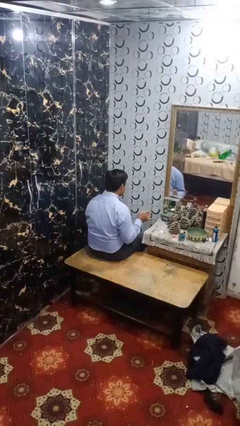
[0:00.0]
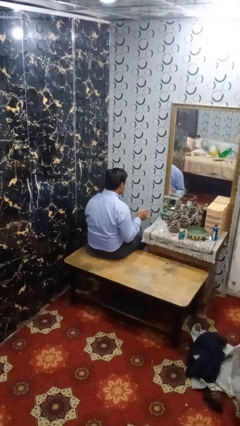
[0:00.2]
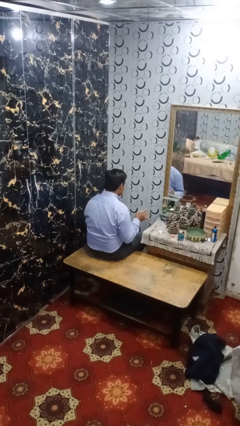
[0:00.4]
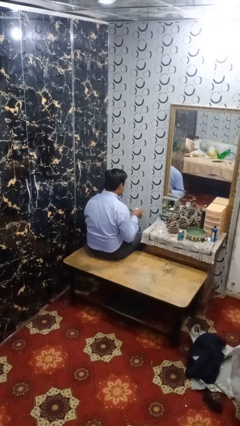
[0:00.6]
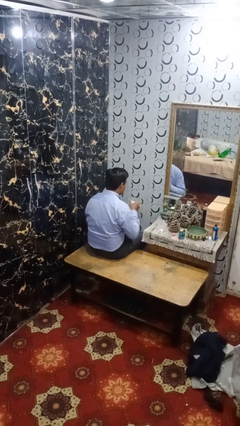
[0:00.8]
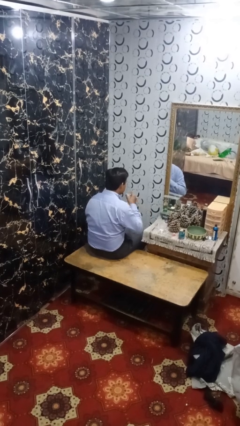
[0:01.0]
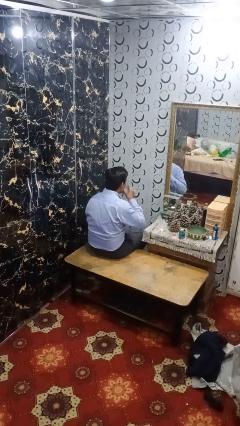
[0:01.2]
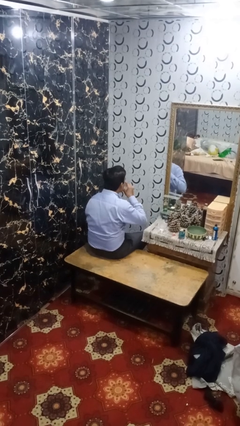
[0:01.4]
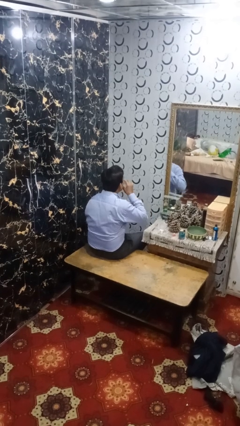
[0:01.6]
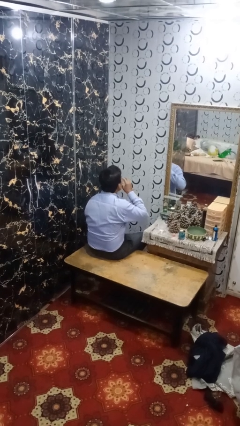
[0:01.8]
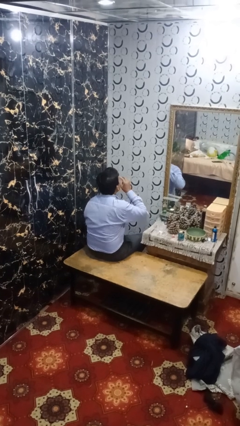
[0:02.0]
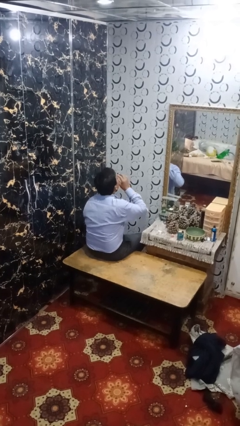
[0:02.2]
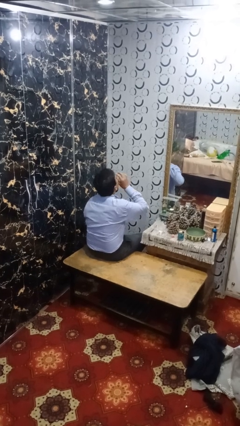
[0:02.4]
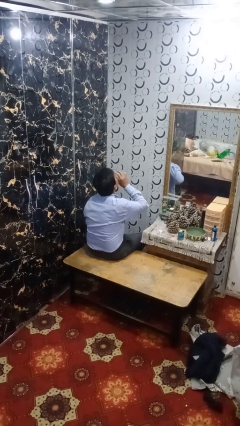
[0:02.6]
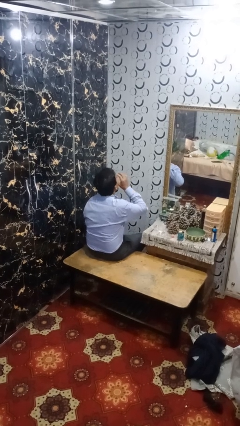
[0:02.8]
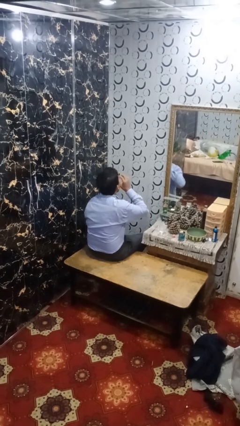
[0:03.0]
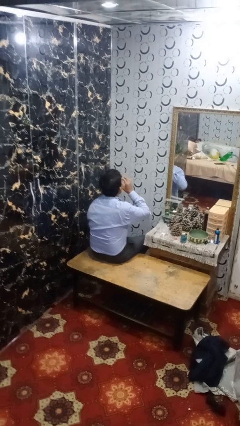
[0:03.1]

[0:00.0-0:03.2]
person drinks from shotglass

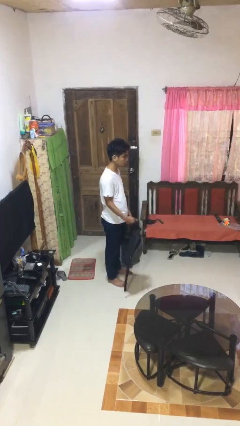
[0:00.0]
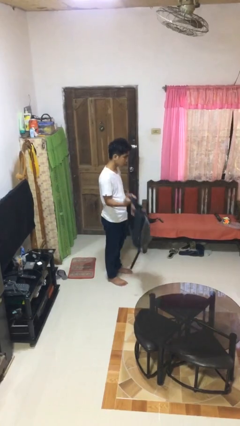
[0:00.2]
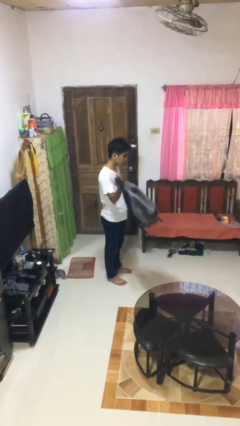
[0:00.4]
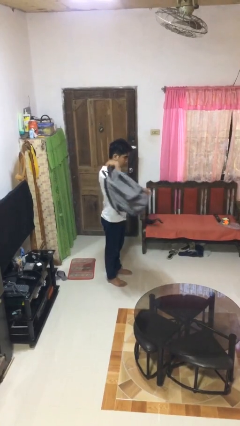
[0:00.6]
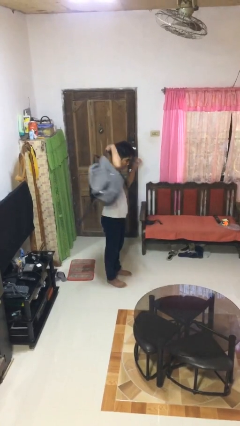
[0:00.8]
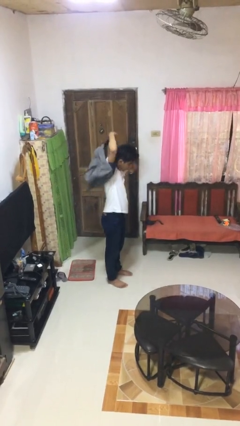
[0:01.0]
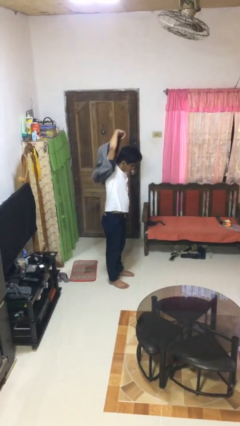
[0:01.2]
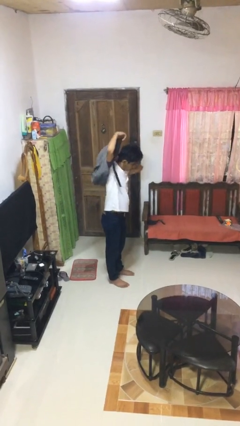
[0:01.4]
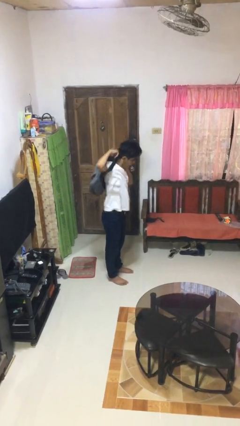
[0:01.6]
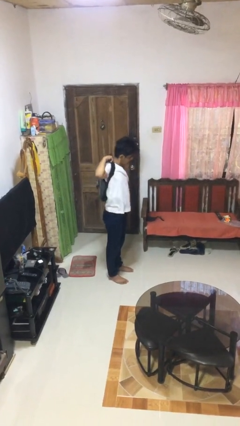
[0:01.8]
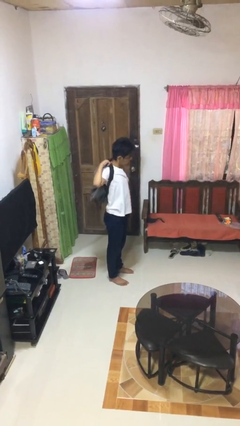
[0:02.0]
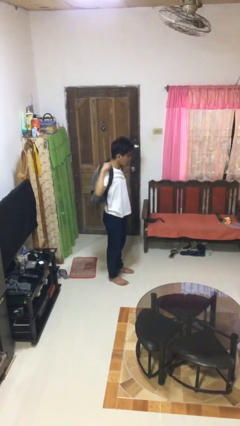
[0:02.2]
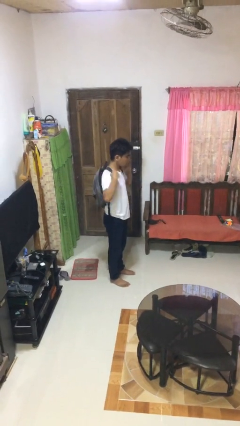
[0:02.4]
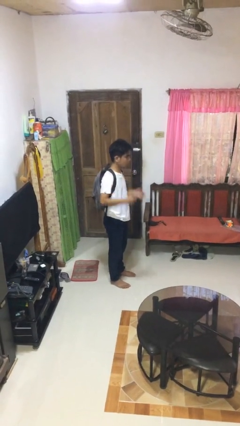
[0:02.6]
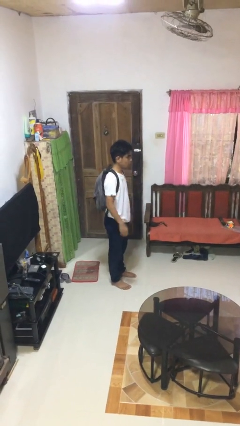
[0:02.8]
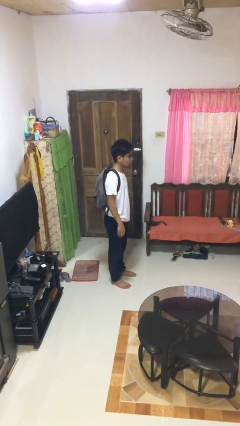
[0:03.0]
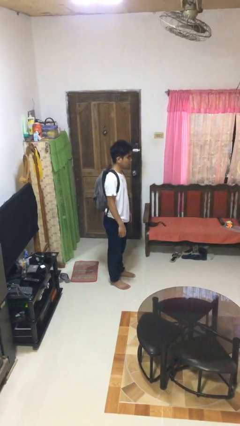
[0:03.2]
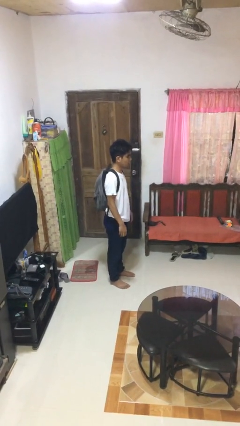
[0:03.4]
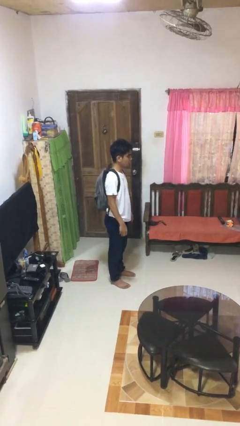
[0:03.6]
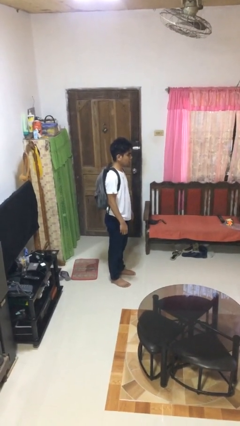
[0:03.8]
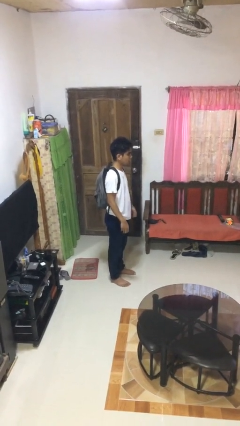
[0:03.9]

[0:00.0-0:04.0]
person puts on backpack

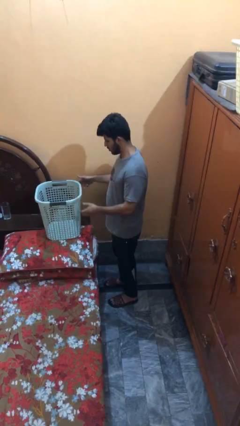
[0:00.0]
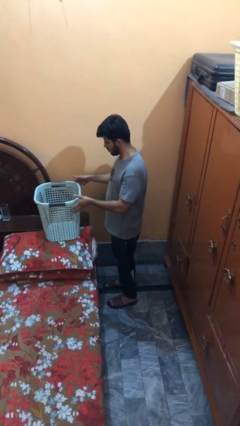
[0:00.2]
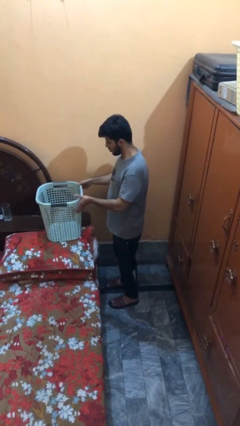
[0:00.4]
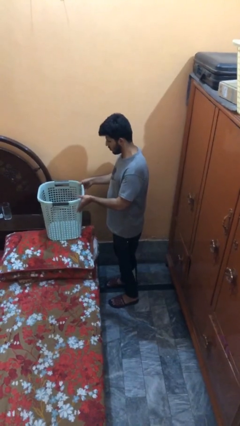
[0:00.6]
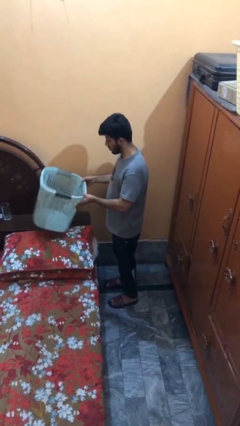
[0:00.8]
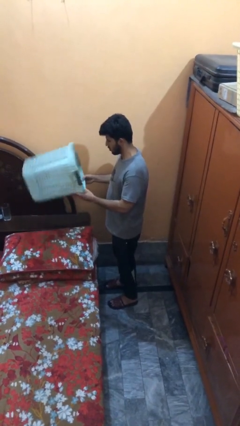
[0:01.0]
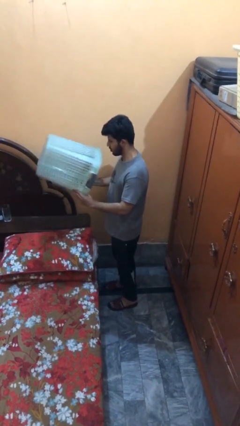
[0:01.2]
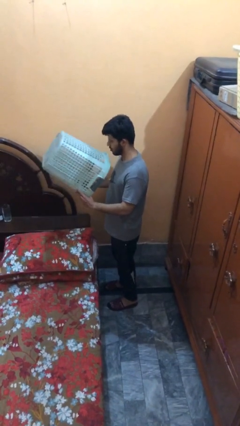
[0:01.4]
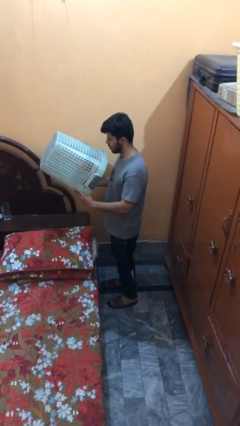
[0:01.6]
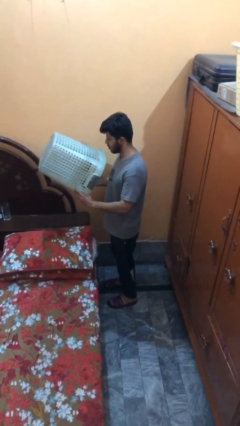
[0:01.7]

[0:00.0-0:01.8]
person picks up object from bed

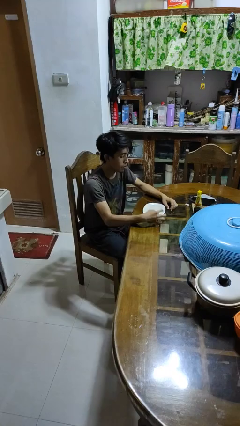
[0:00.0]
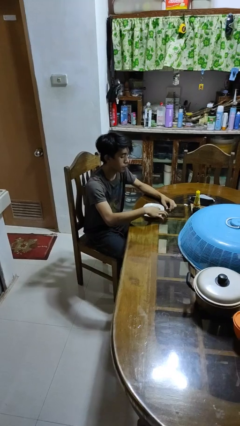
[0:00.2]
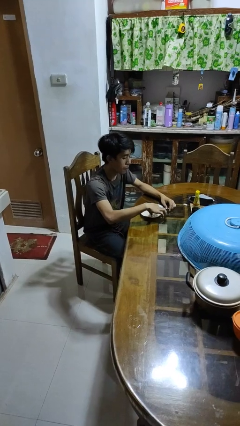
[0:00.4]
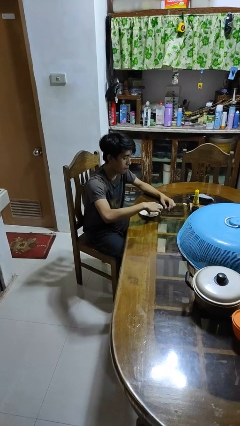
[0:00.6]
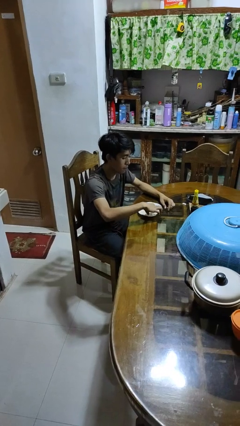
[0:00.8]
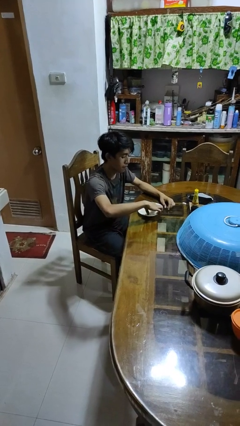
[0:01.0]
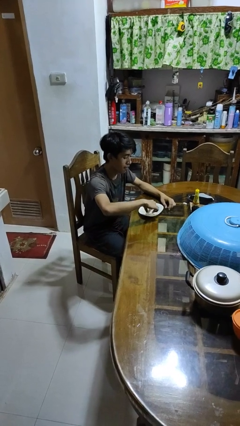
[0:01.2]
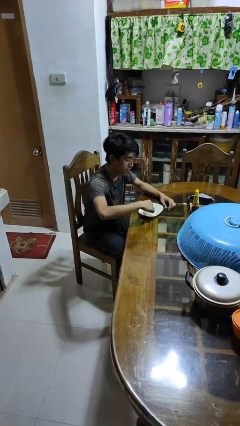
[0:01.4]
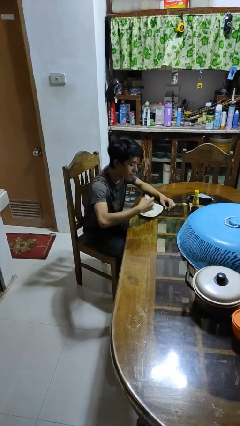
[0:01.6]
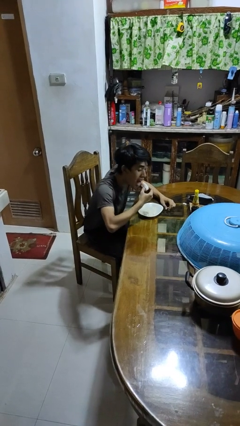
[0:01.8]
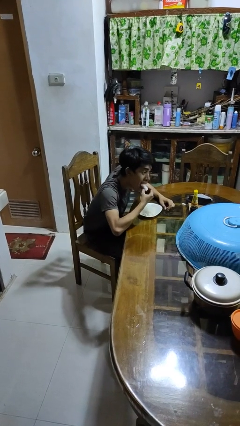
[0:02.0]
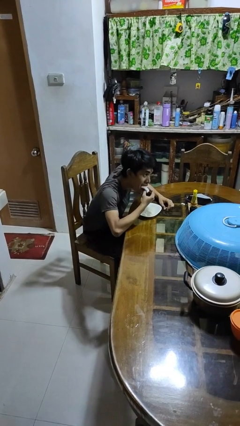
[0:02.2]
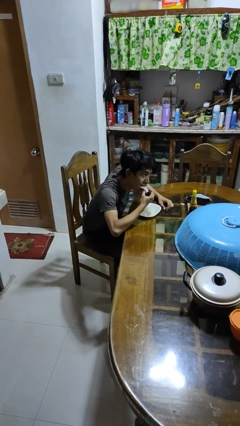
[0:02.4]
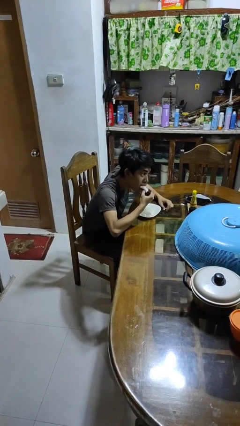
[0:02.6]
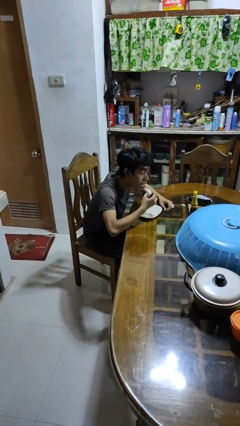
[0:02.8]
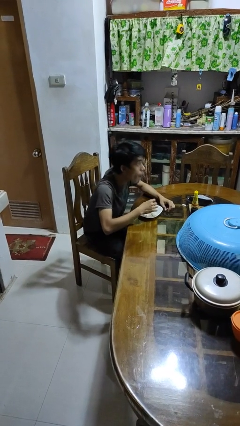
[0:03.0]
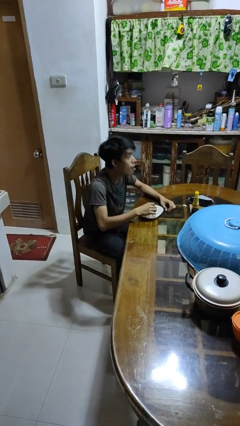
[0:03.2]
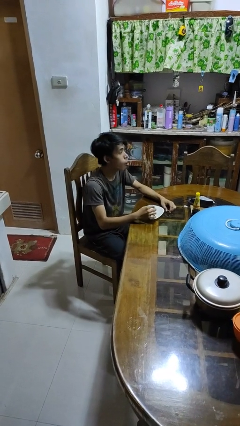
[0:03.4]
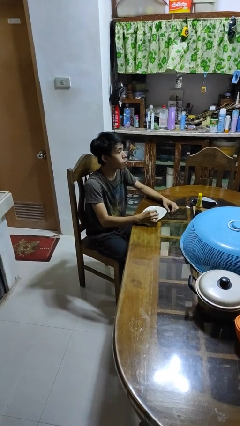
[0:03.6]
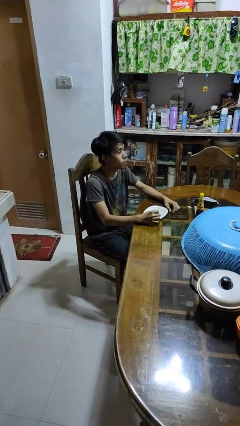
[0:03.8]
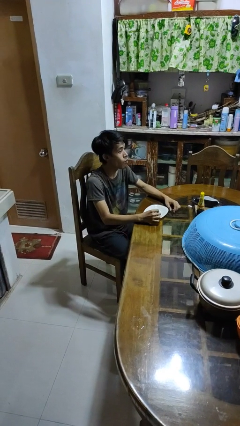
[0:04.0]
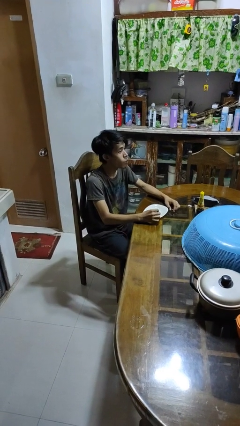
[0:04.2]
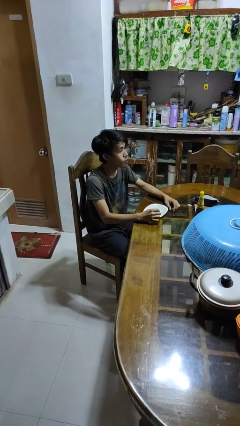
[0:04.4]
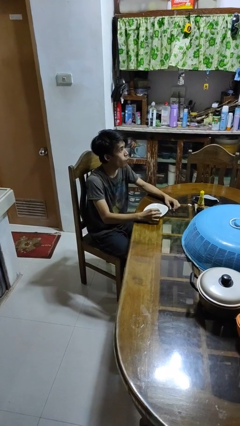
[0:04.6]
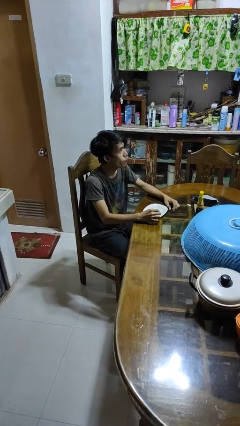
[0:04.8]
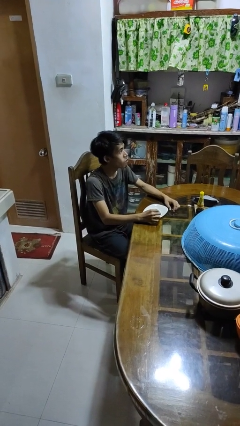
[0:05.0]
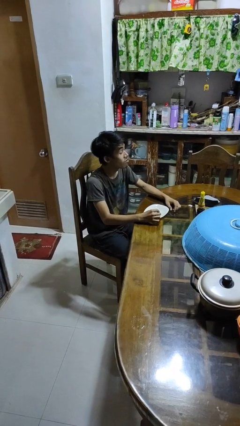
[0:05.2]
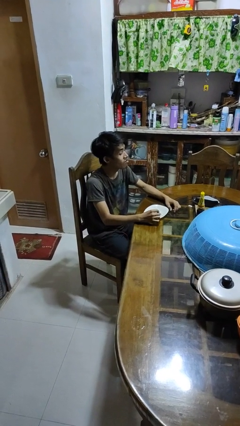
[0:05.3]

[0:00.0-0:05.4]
person eats with hands

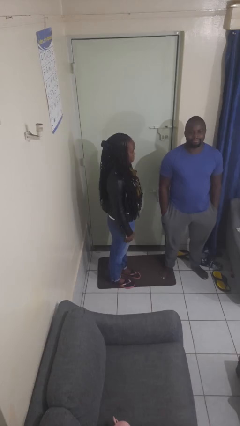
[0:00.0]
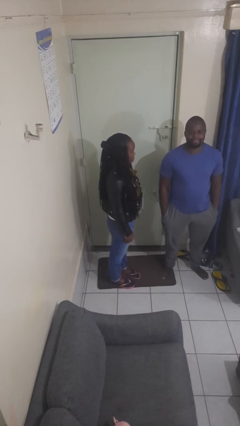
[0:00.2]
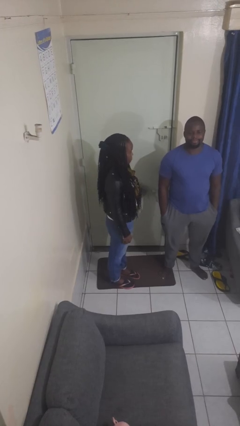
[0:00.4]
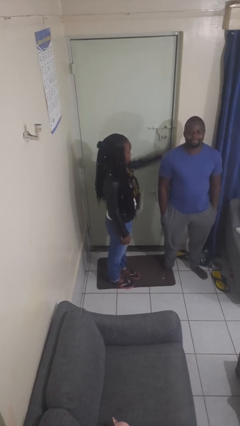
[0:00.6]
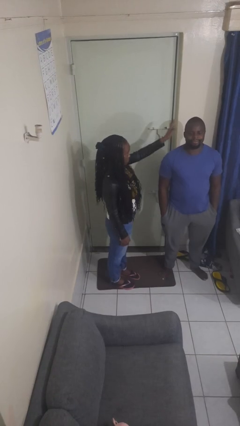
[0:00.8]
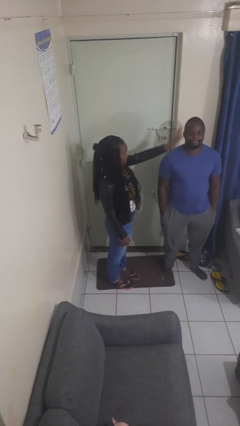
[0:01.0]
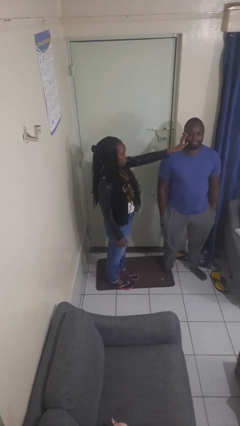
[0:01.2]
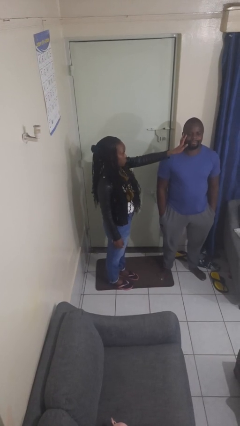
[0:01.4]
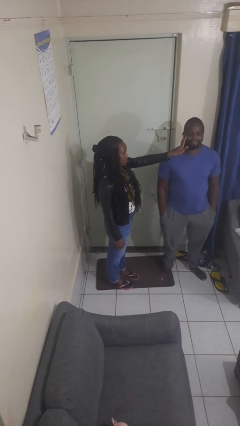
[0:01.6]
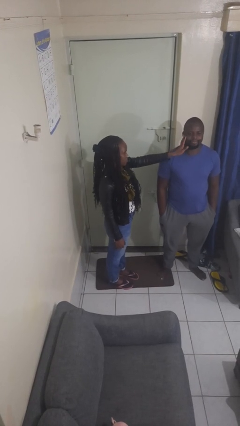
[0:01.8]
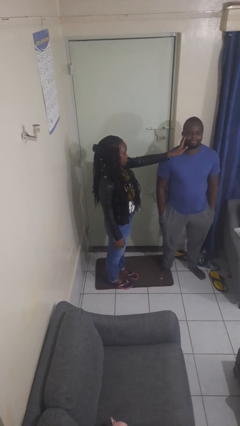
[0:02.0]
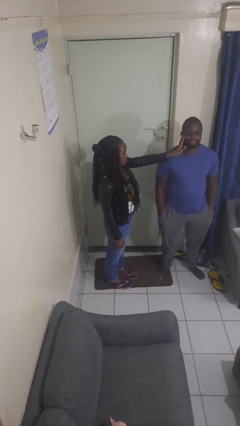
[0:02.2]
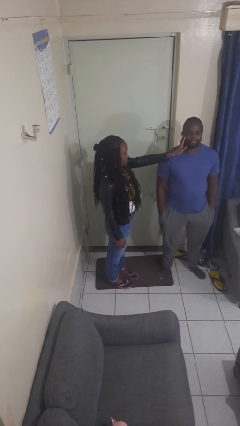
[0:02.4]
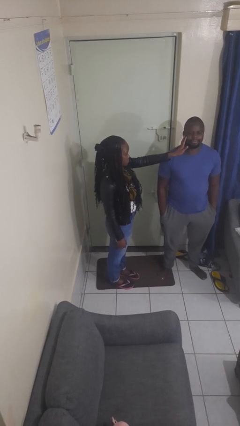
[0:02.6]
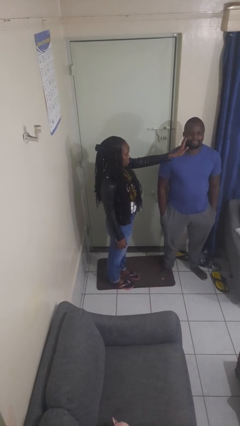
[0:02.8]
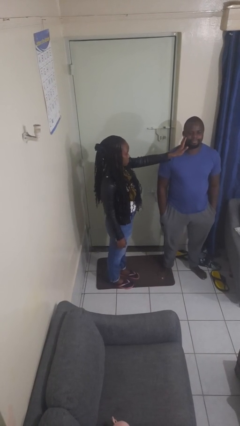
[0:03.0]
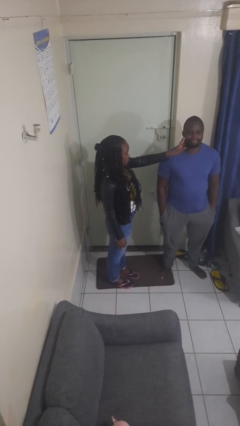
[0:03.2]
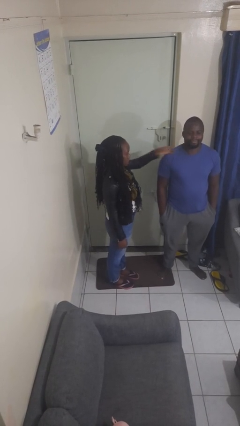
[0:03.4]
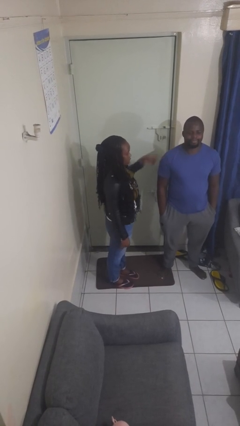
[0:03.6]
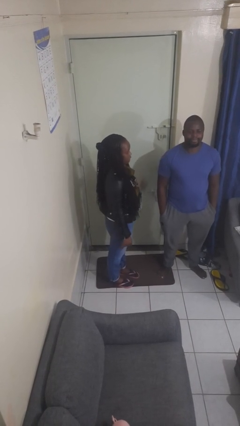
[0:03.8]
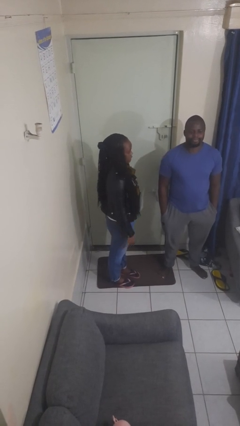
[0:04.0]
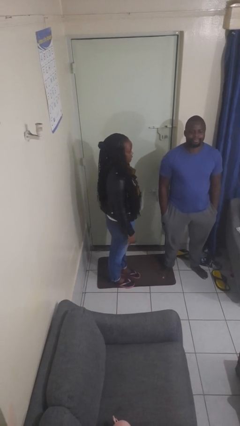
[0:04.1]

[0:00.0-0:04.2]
person touches face of person
